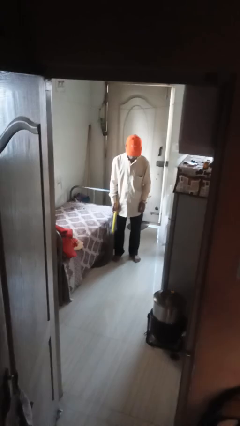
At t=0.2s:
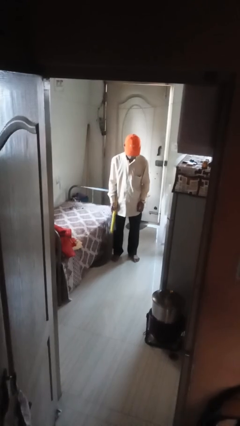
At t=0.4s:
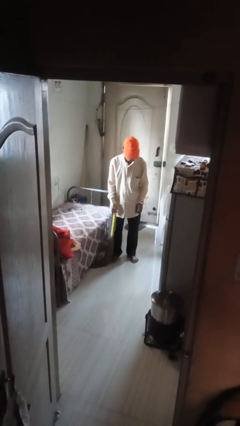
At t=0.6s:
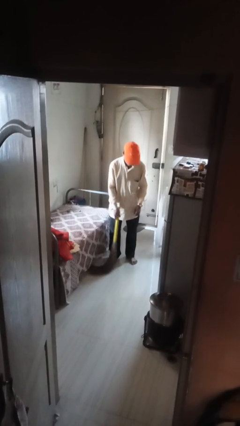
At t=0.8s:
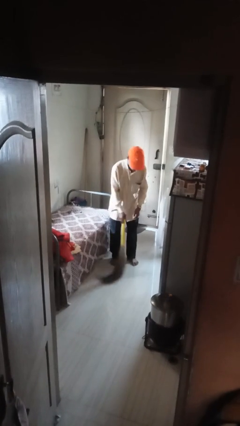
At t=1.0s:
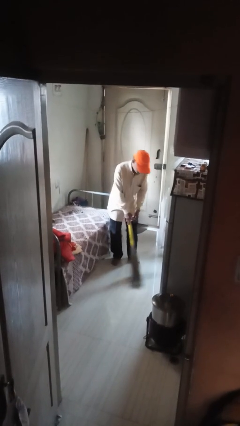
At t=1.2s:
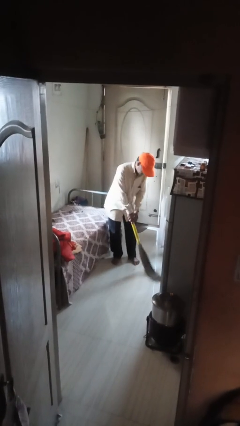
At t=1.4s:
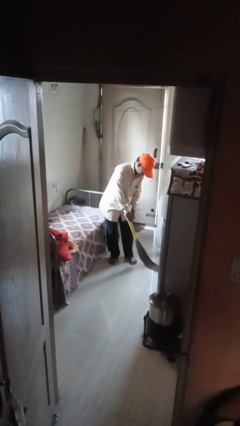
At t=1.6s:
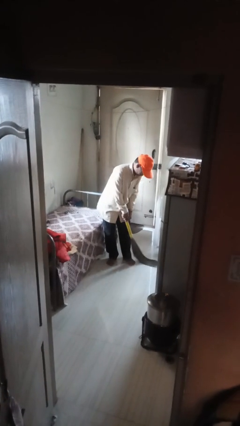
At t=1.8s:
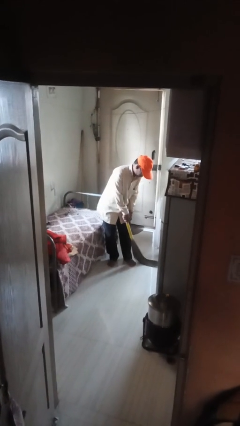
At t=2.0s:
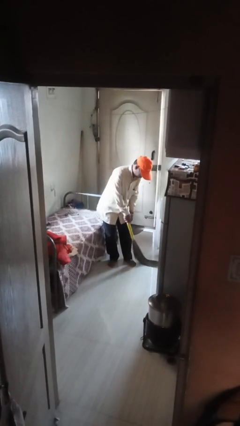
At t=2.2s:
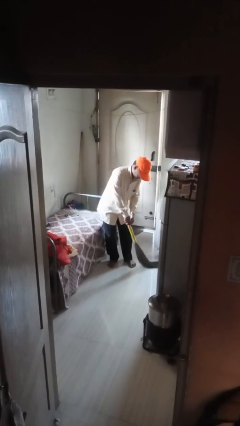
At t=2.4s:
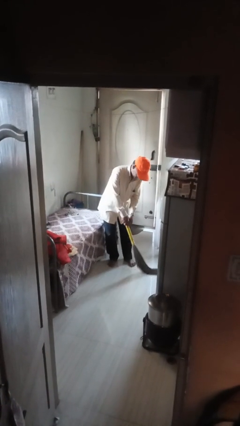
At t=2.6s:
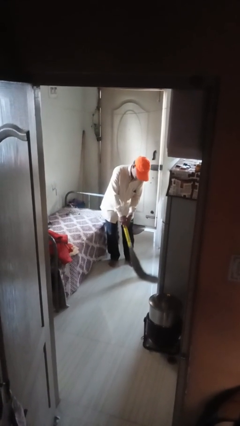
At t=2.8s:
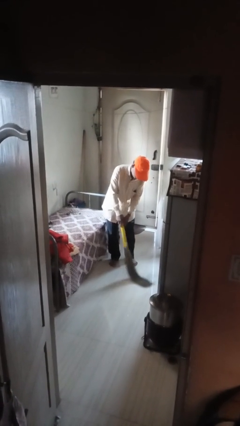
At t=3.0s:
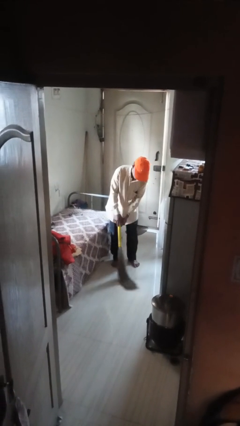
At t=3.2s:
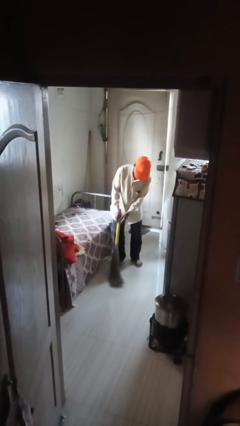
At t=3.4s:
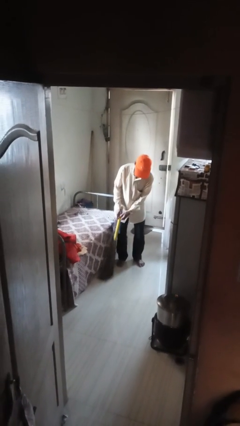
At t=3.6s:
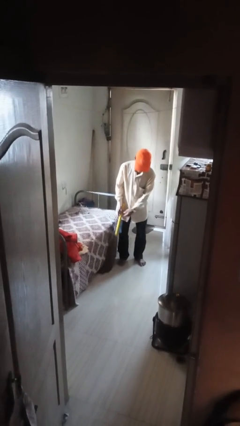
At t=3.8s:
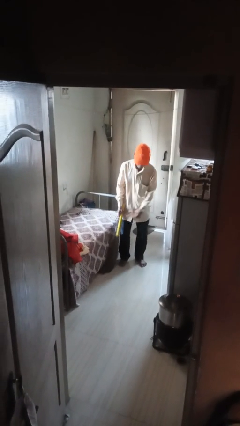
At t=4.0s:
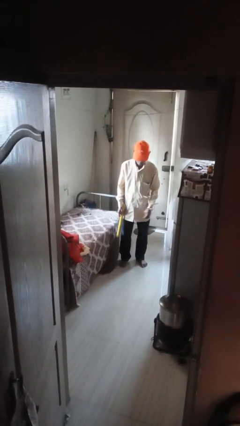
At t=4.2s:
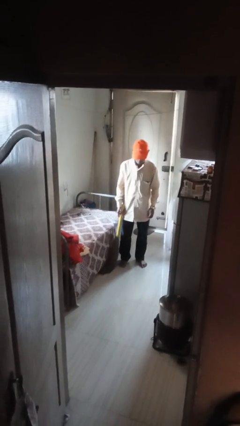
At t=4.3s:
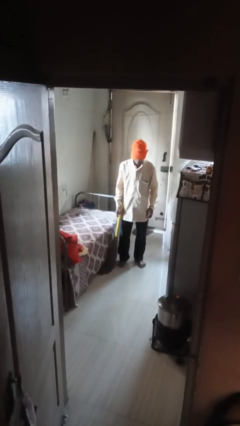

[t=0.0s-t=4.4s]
person sweeps floor

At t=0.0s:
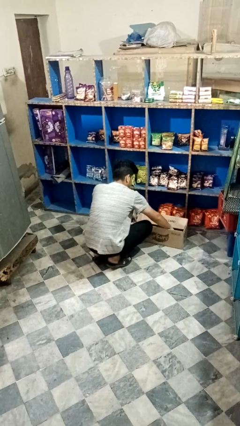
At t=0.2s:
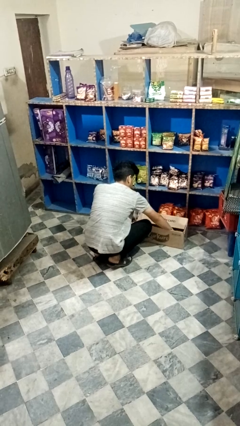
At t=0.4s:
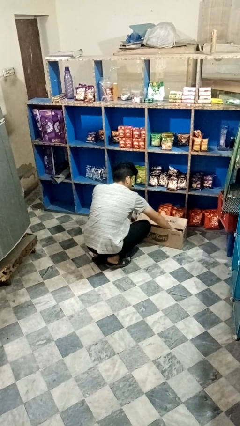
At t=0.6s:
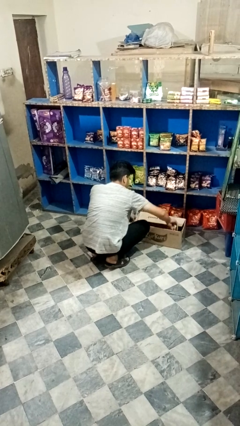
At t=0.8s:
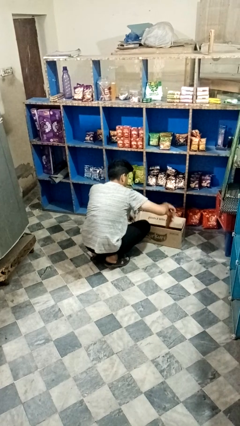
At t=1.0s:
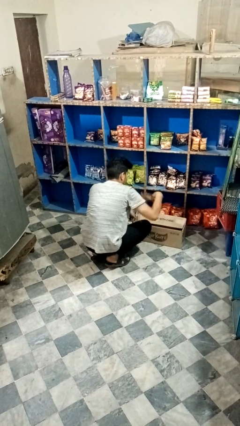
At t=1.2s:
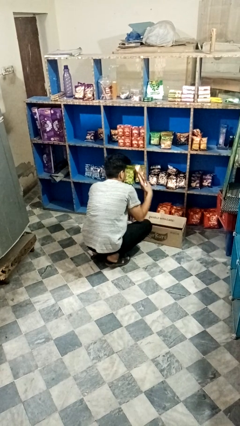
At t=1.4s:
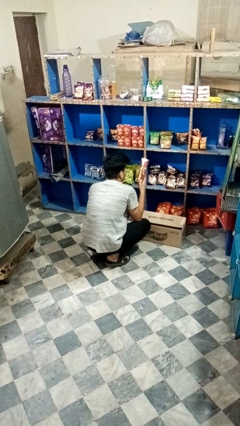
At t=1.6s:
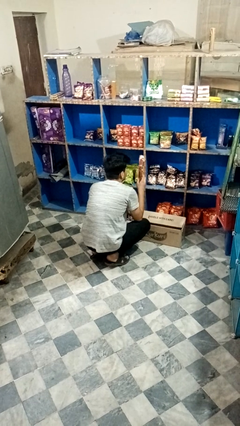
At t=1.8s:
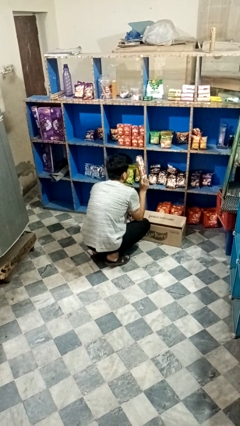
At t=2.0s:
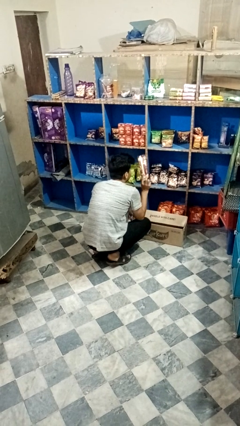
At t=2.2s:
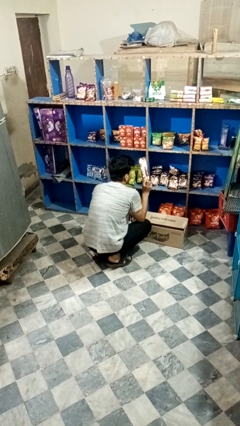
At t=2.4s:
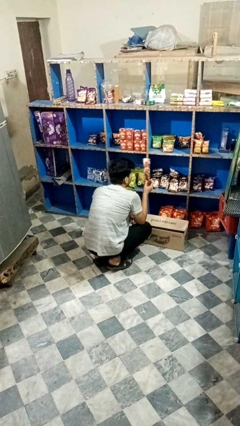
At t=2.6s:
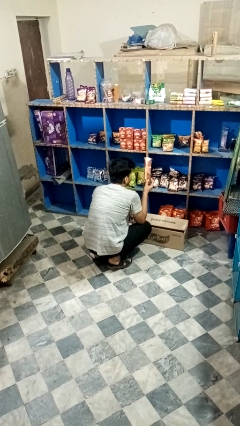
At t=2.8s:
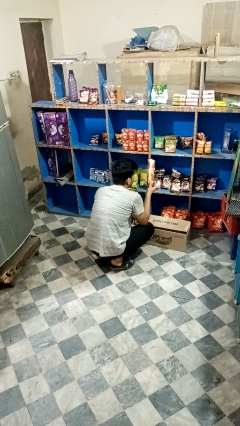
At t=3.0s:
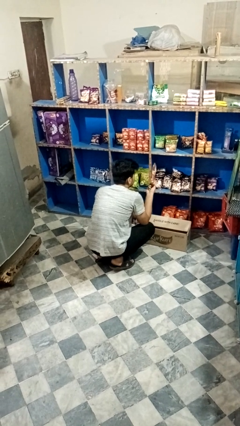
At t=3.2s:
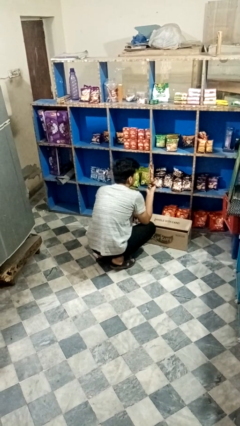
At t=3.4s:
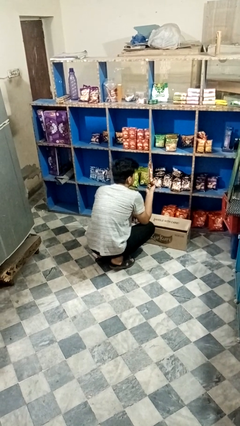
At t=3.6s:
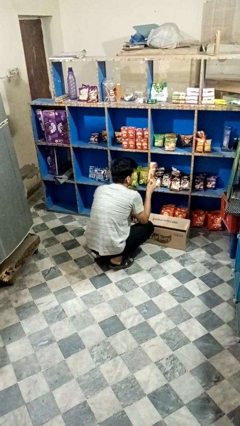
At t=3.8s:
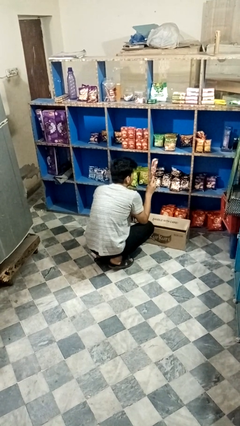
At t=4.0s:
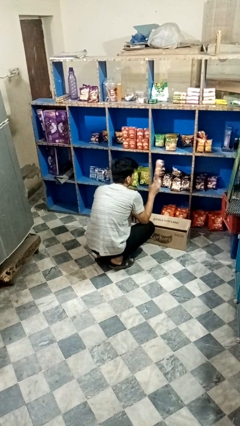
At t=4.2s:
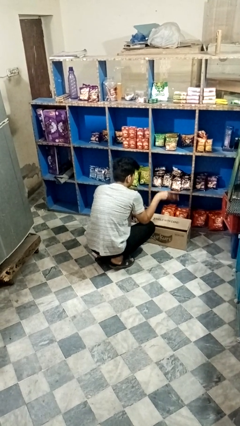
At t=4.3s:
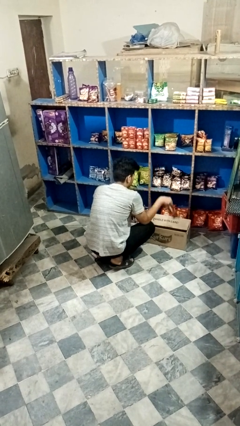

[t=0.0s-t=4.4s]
person takes object from box

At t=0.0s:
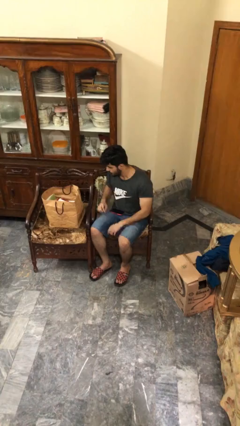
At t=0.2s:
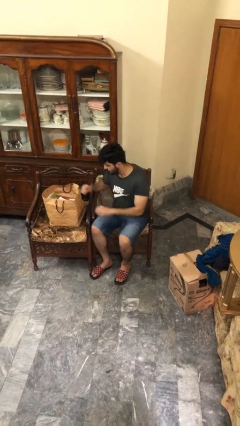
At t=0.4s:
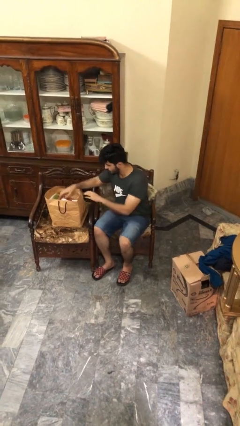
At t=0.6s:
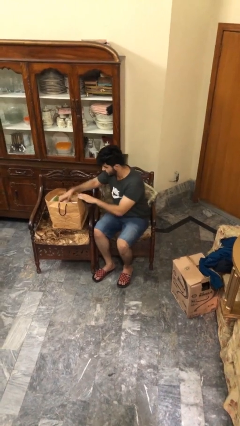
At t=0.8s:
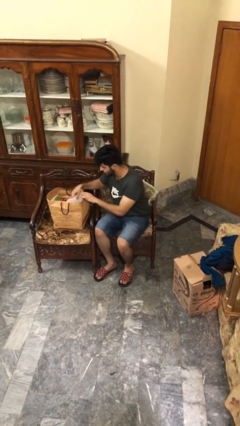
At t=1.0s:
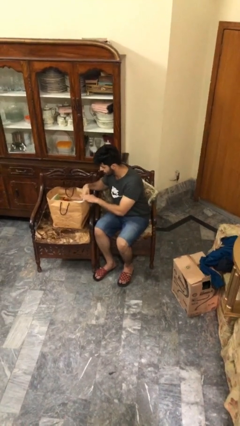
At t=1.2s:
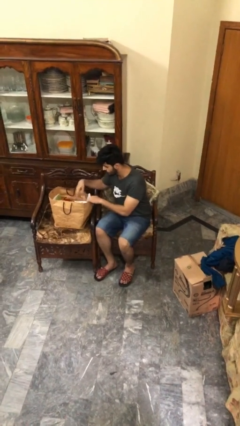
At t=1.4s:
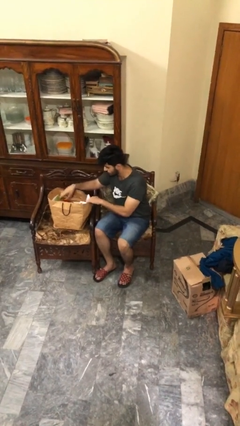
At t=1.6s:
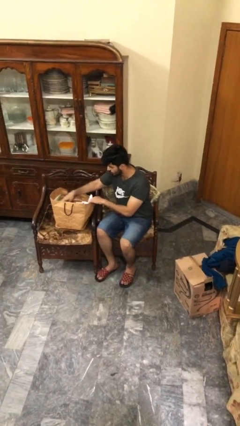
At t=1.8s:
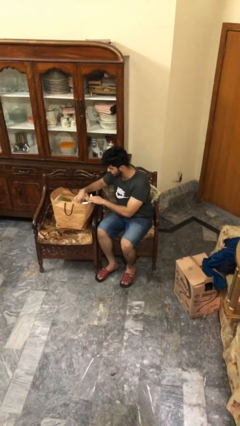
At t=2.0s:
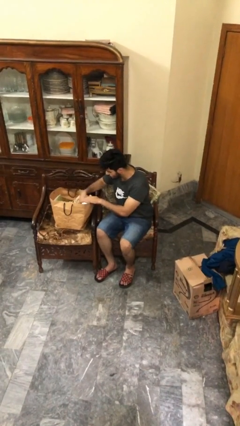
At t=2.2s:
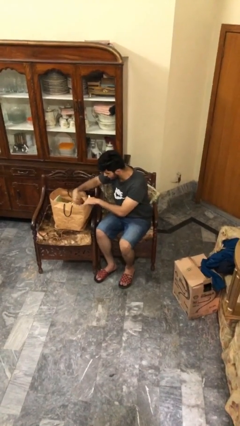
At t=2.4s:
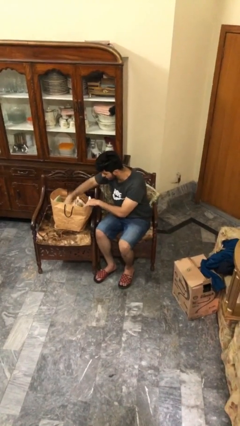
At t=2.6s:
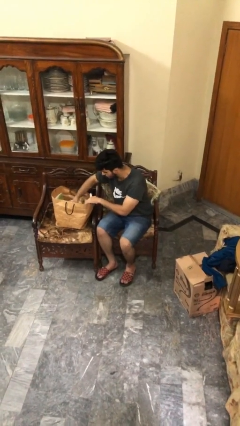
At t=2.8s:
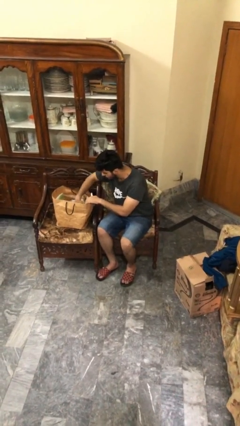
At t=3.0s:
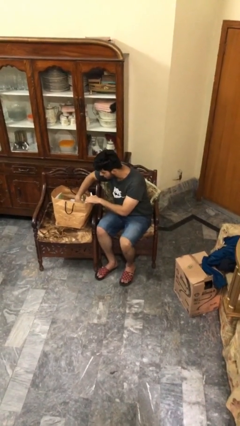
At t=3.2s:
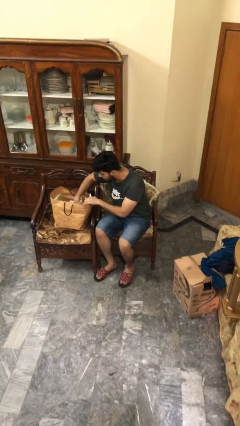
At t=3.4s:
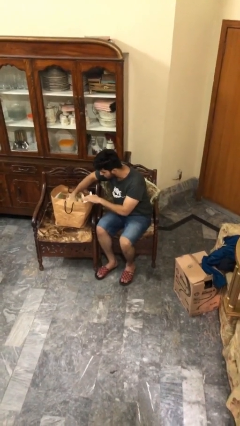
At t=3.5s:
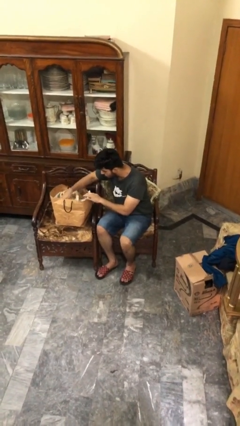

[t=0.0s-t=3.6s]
person searches in bag

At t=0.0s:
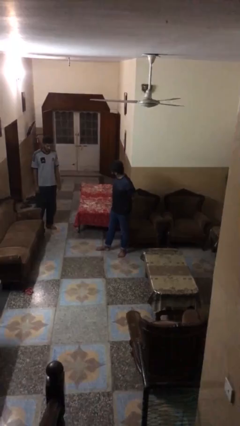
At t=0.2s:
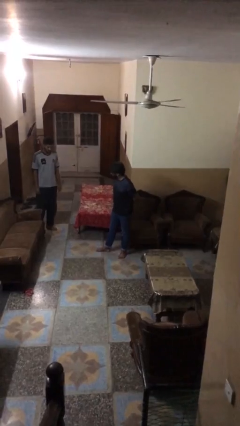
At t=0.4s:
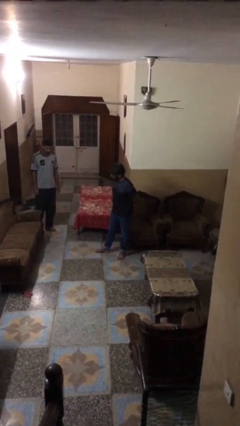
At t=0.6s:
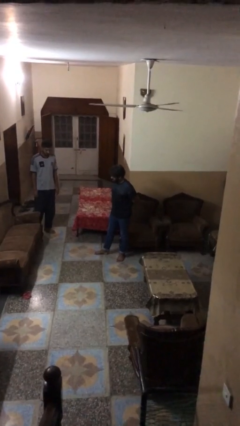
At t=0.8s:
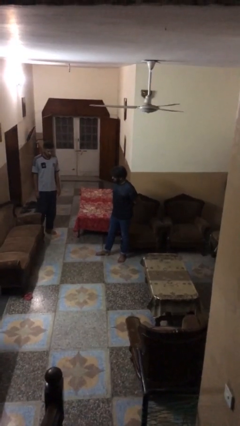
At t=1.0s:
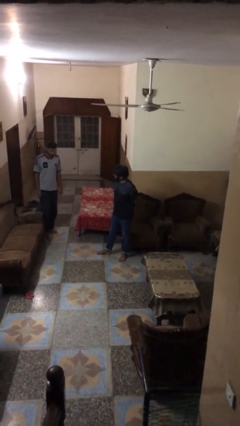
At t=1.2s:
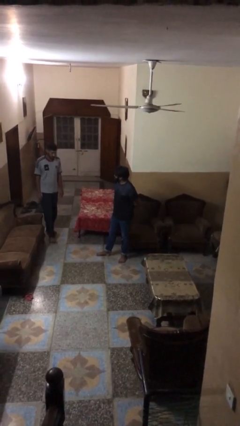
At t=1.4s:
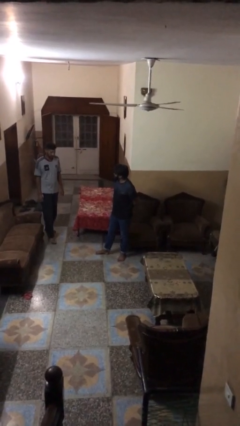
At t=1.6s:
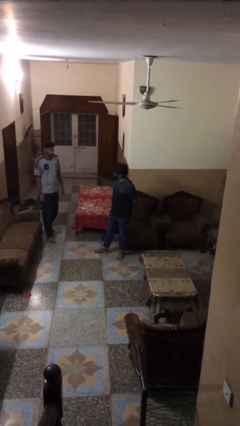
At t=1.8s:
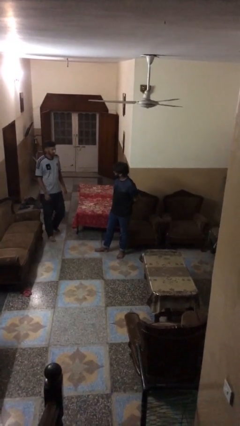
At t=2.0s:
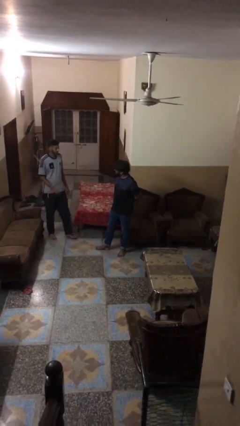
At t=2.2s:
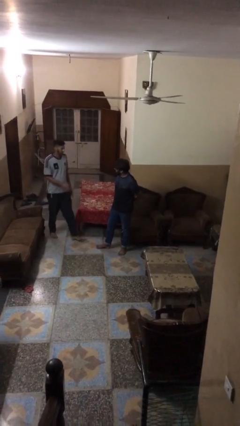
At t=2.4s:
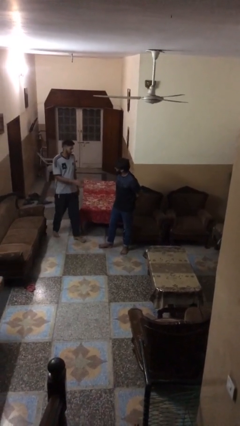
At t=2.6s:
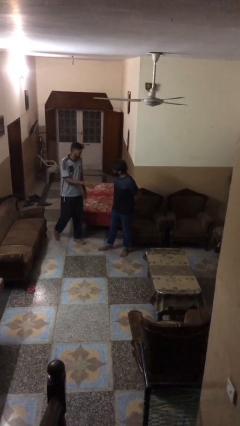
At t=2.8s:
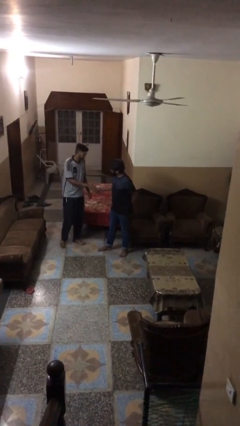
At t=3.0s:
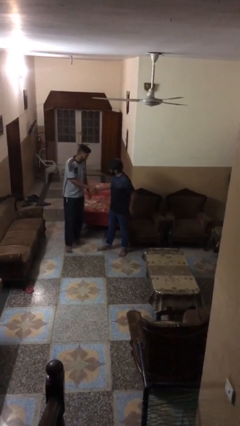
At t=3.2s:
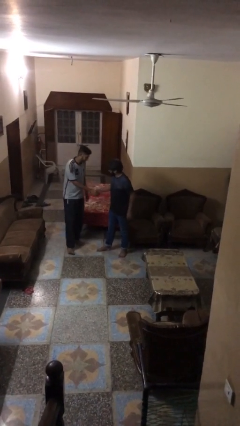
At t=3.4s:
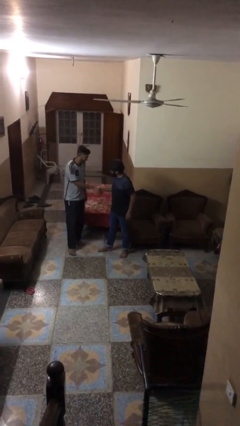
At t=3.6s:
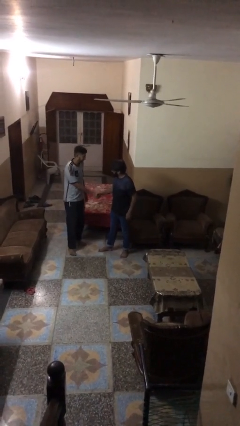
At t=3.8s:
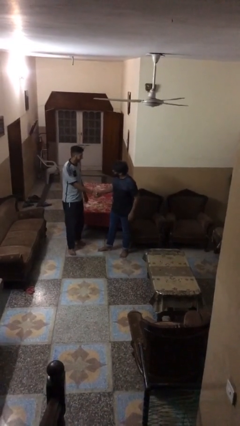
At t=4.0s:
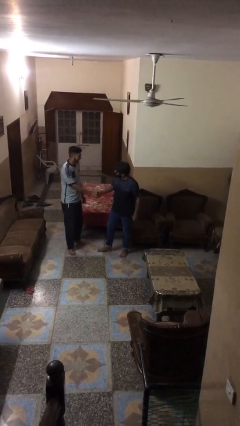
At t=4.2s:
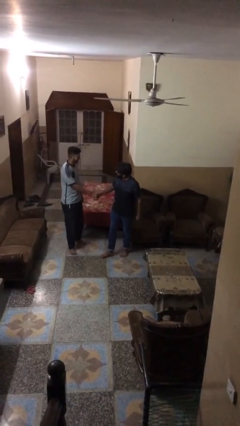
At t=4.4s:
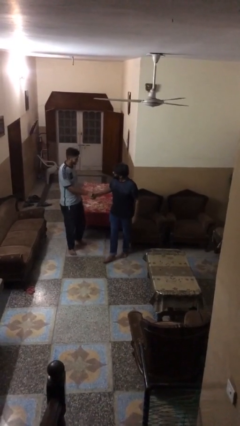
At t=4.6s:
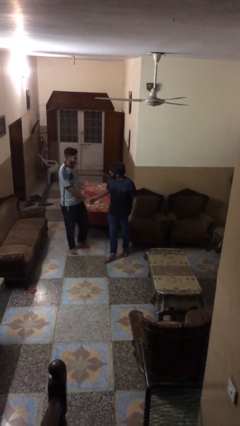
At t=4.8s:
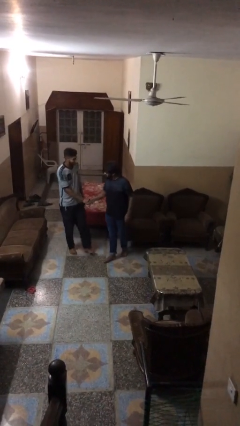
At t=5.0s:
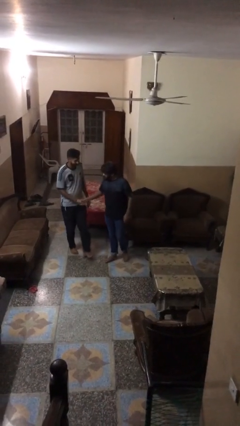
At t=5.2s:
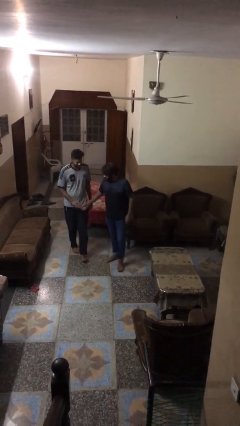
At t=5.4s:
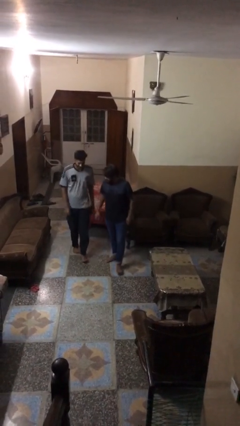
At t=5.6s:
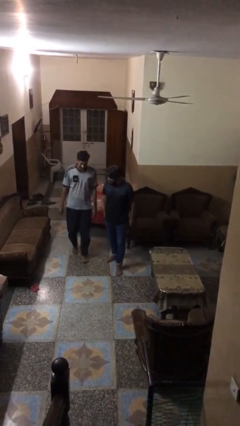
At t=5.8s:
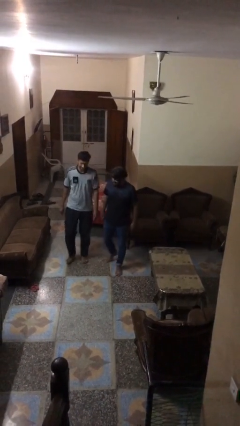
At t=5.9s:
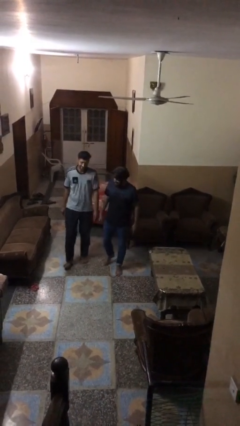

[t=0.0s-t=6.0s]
person shakes hand
